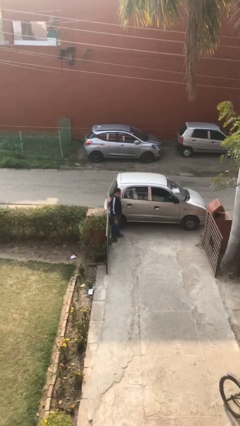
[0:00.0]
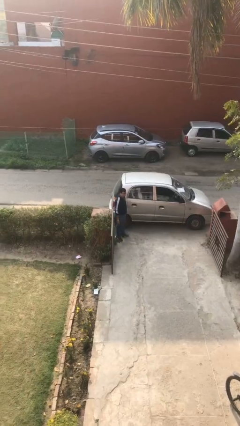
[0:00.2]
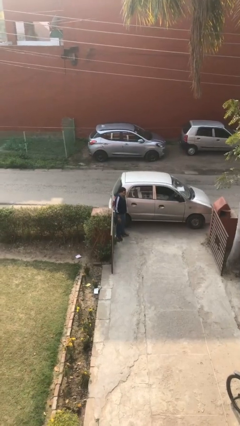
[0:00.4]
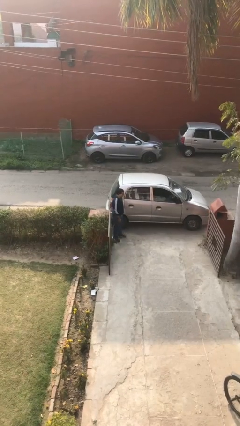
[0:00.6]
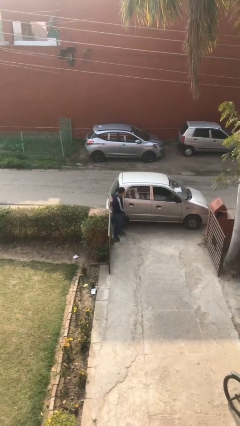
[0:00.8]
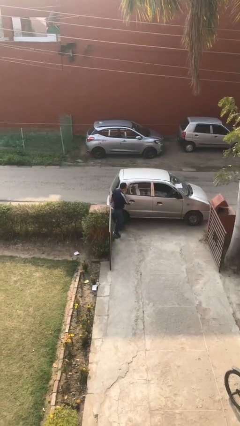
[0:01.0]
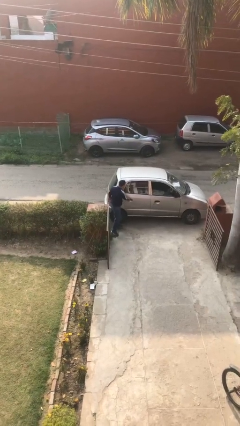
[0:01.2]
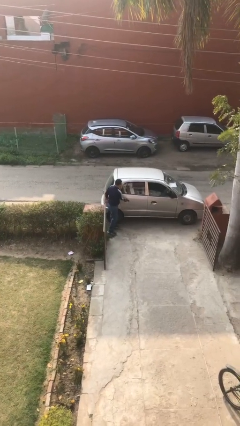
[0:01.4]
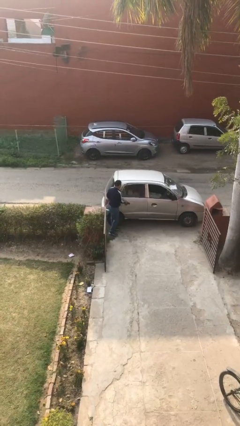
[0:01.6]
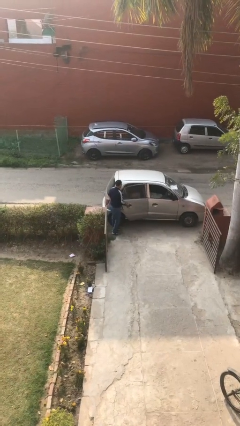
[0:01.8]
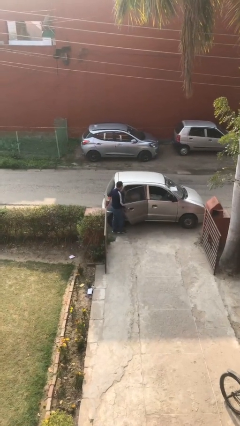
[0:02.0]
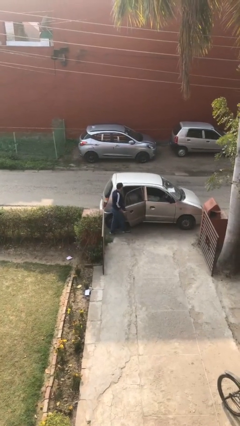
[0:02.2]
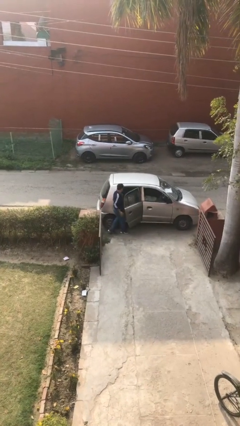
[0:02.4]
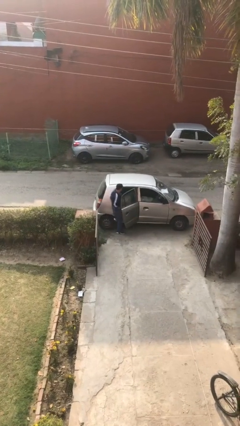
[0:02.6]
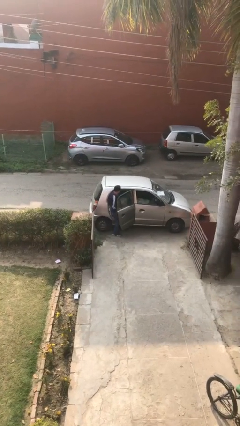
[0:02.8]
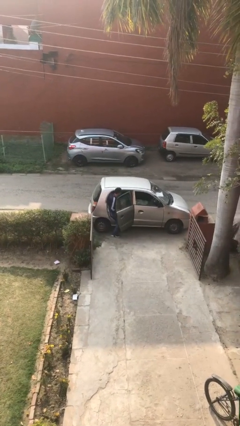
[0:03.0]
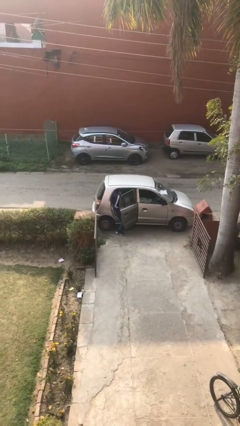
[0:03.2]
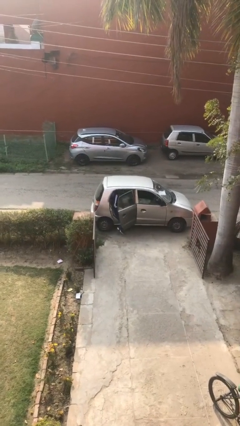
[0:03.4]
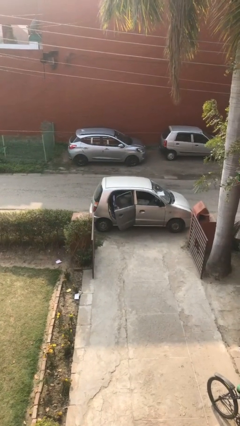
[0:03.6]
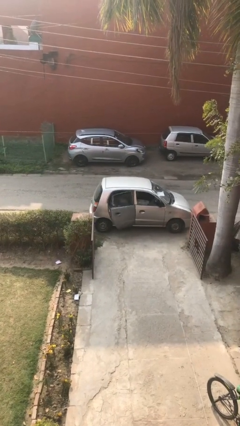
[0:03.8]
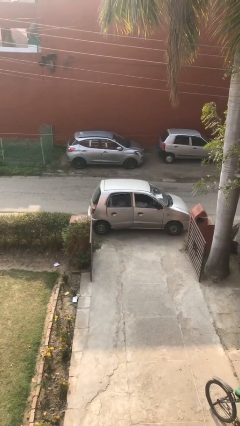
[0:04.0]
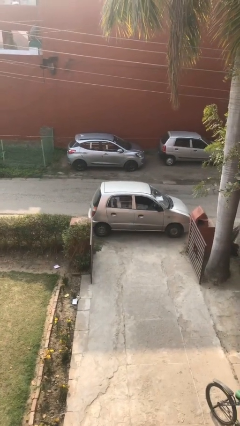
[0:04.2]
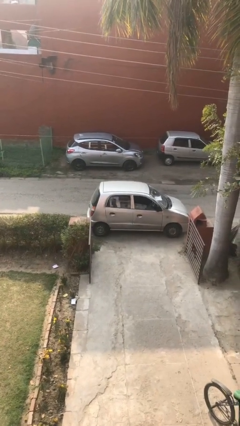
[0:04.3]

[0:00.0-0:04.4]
person enters car

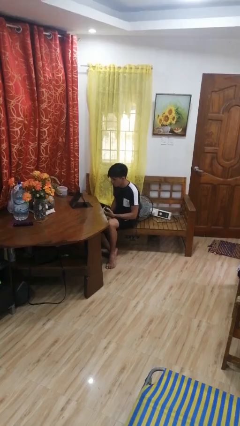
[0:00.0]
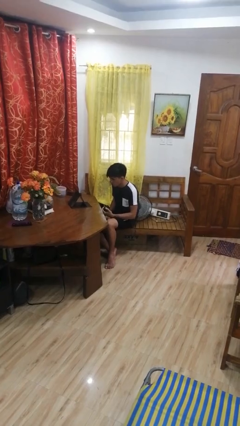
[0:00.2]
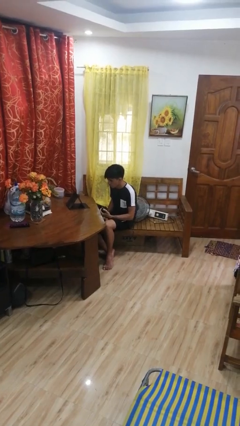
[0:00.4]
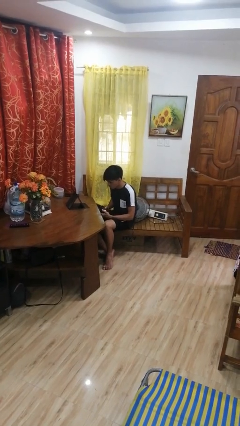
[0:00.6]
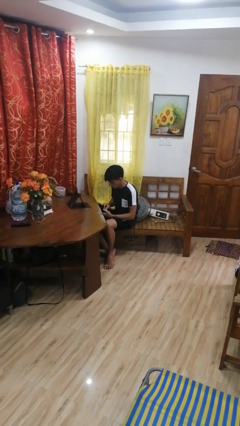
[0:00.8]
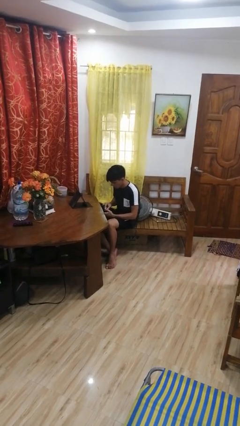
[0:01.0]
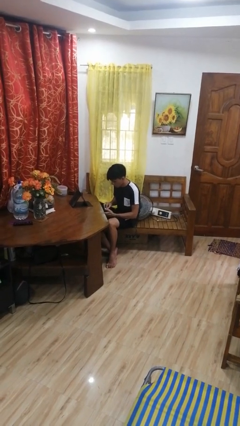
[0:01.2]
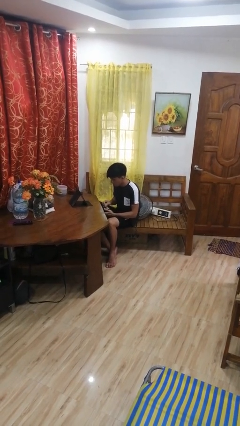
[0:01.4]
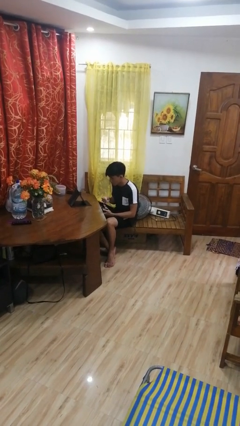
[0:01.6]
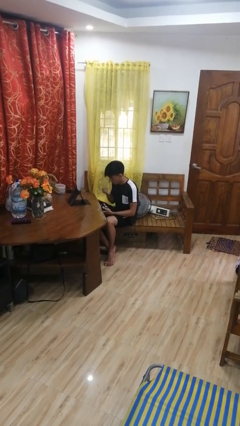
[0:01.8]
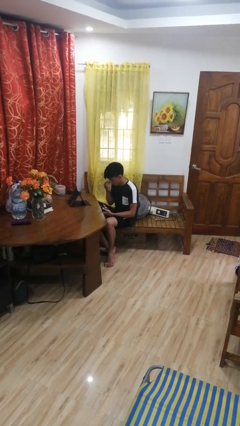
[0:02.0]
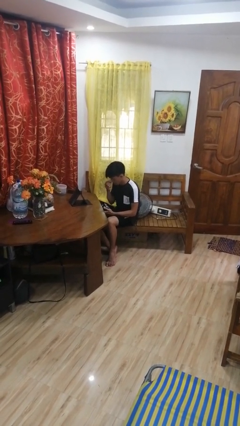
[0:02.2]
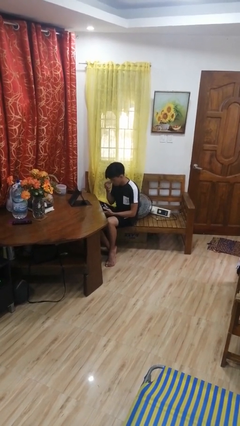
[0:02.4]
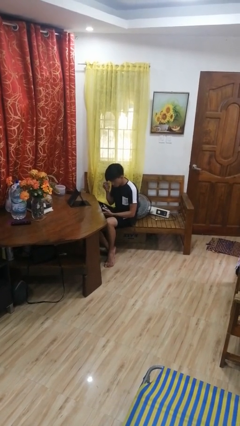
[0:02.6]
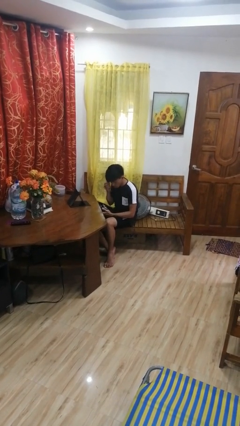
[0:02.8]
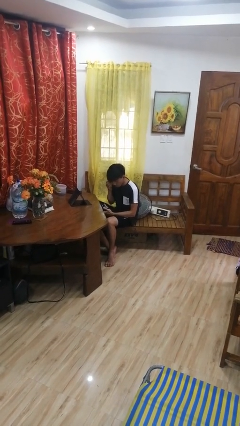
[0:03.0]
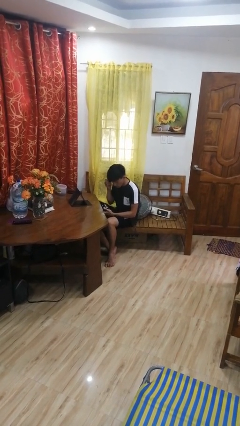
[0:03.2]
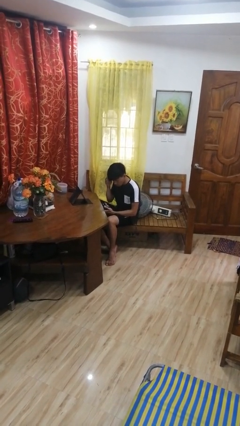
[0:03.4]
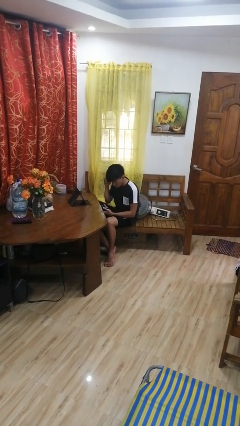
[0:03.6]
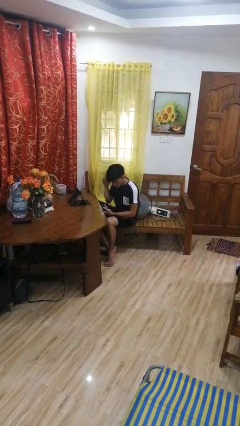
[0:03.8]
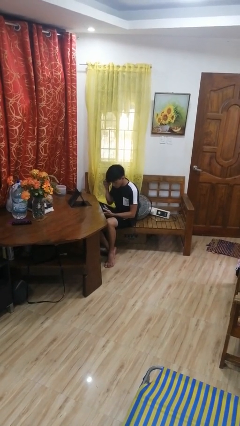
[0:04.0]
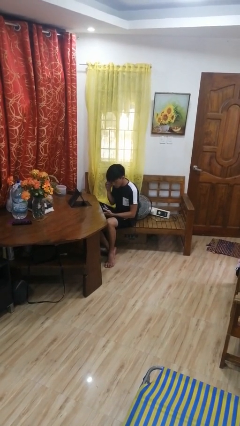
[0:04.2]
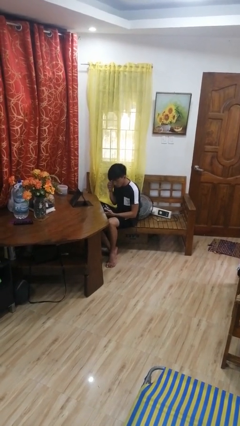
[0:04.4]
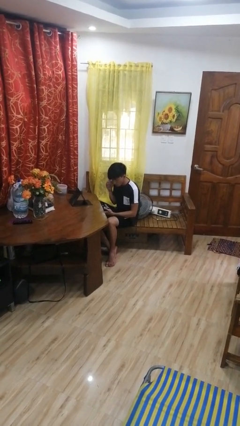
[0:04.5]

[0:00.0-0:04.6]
person applies eye makeup

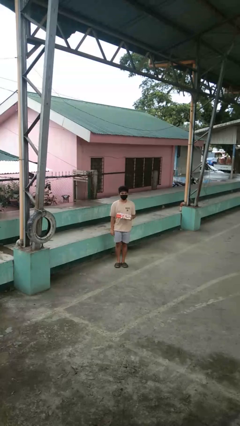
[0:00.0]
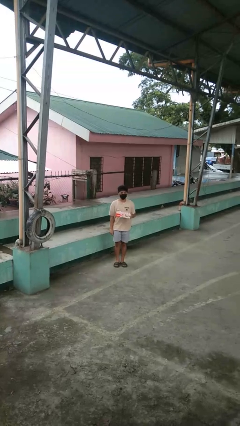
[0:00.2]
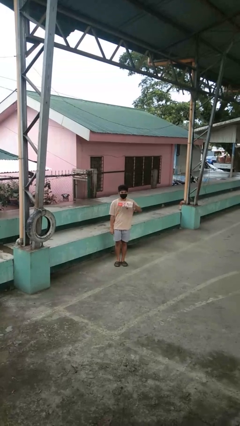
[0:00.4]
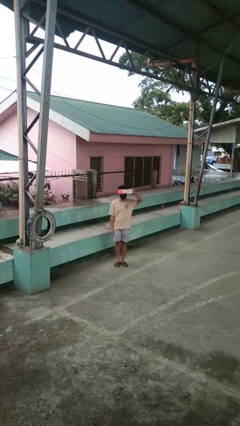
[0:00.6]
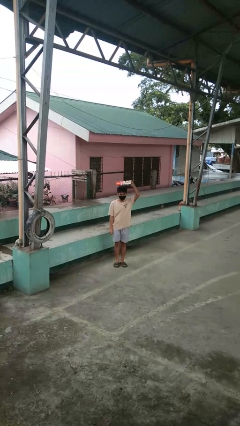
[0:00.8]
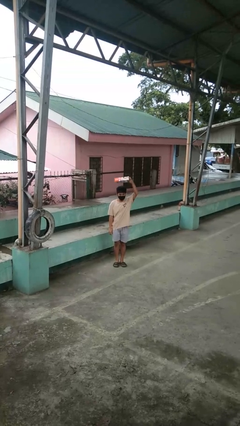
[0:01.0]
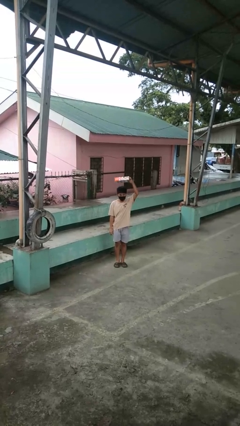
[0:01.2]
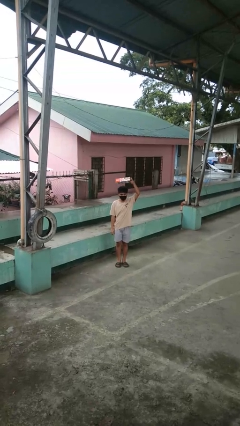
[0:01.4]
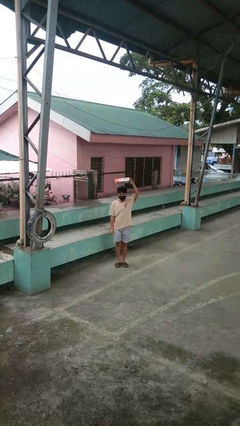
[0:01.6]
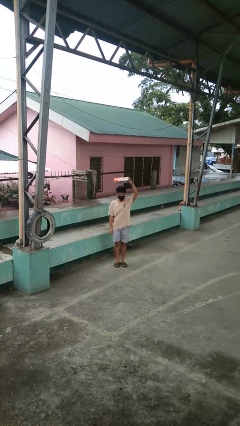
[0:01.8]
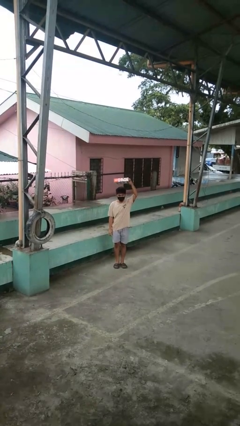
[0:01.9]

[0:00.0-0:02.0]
person holds object above head

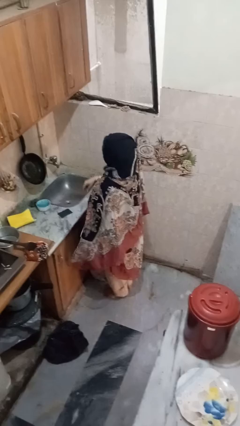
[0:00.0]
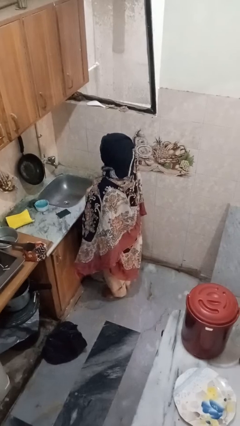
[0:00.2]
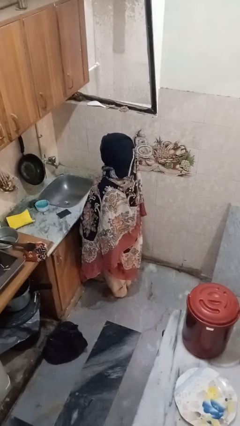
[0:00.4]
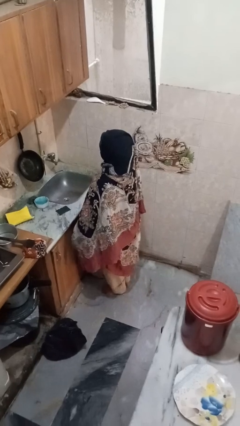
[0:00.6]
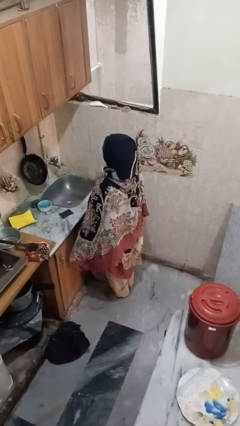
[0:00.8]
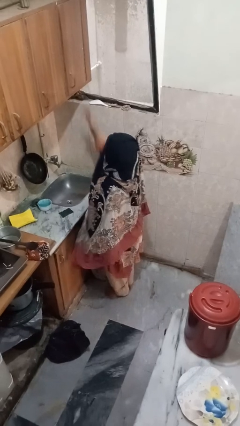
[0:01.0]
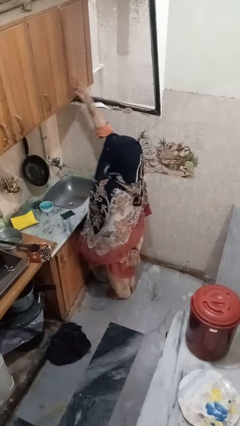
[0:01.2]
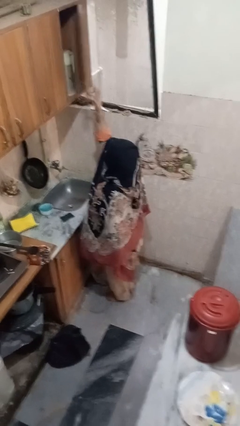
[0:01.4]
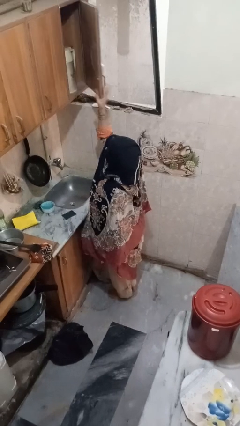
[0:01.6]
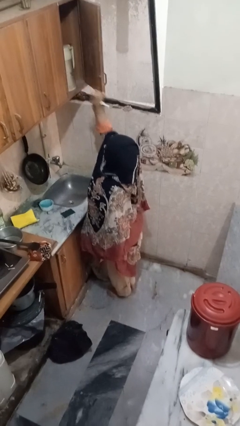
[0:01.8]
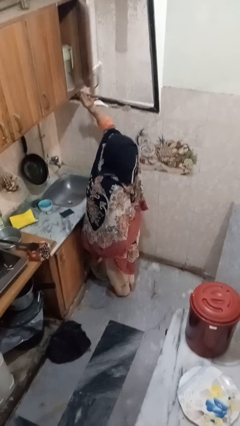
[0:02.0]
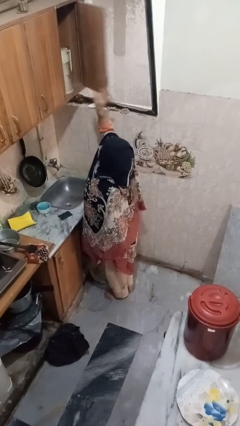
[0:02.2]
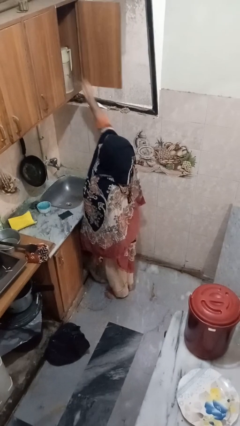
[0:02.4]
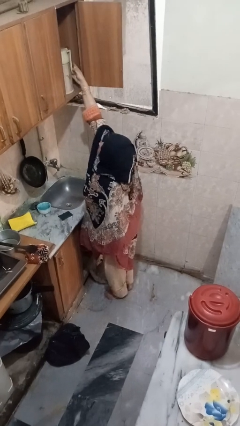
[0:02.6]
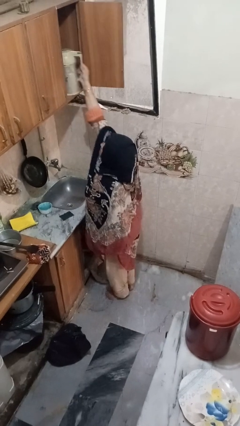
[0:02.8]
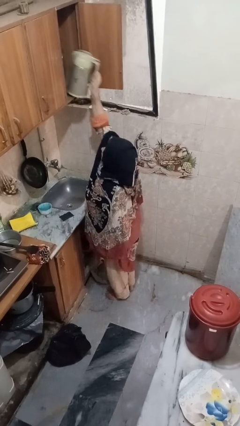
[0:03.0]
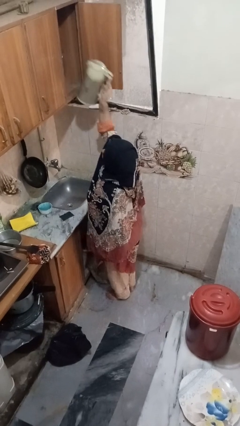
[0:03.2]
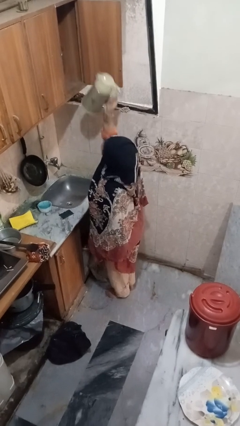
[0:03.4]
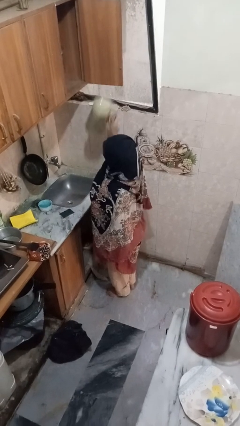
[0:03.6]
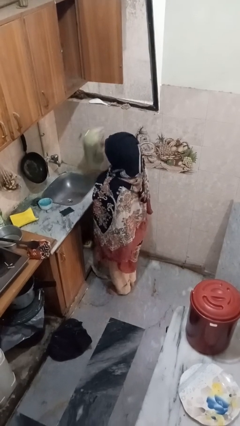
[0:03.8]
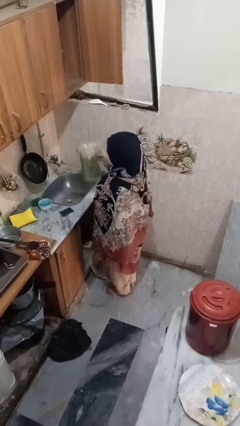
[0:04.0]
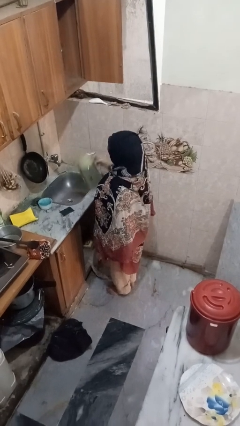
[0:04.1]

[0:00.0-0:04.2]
person puts object in cabinet

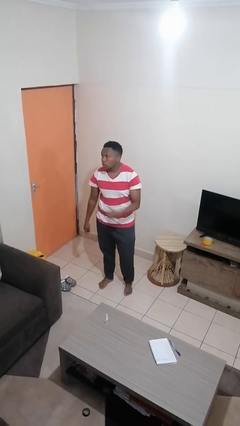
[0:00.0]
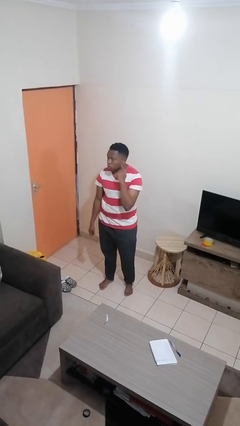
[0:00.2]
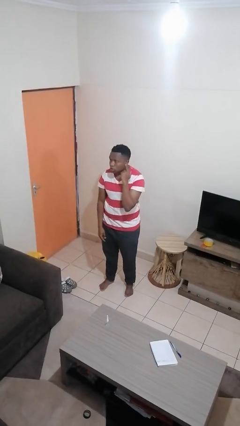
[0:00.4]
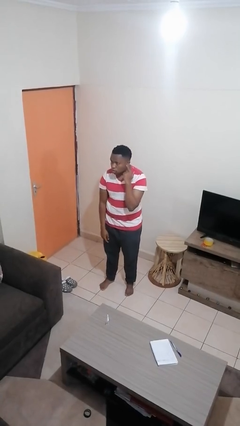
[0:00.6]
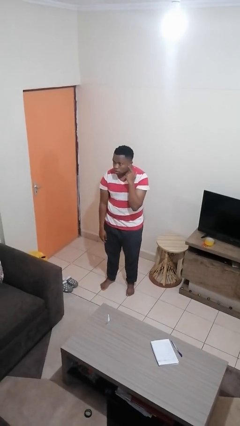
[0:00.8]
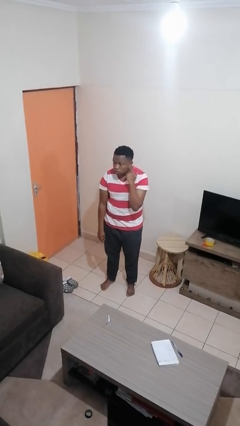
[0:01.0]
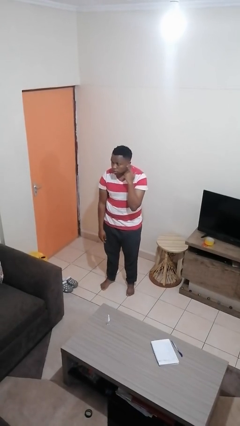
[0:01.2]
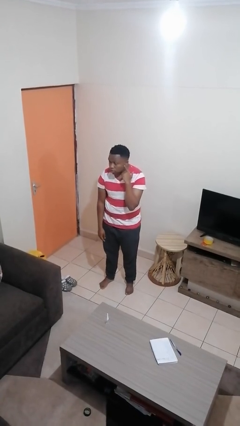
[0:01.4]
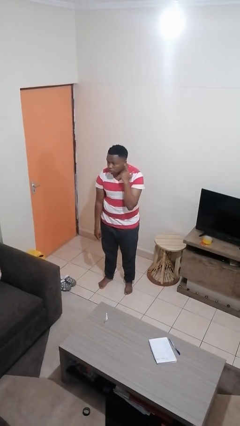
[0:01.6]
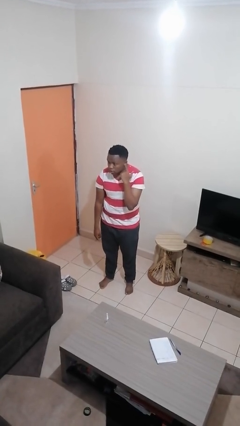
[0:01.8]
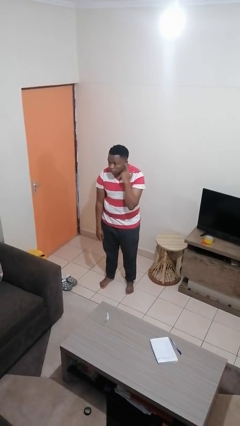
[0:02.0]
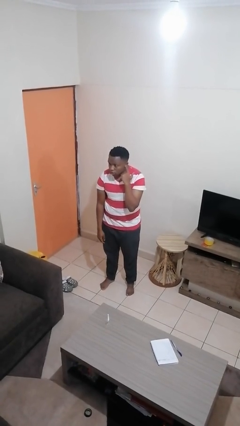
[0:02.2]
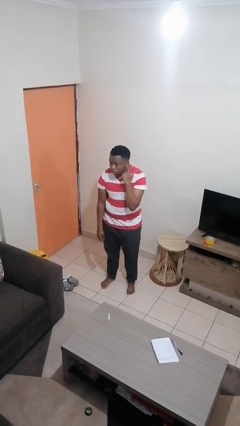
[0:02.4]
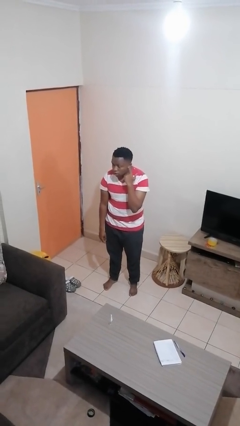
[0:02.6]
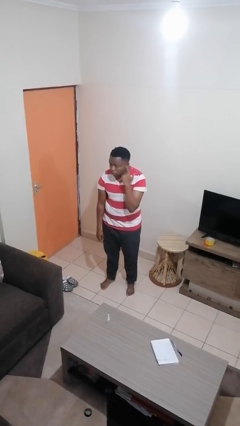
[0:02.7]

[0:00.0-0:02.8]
person gestures listen closely
